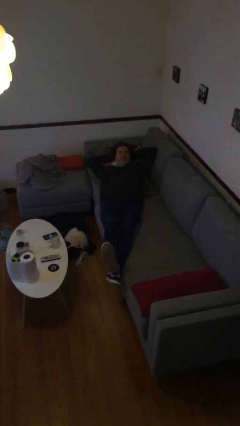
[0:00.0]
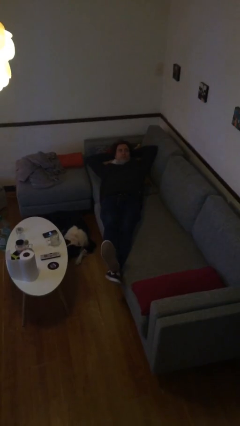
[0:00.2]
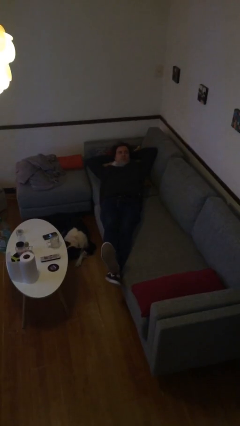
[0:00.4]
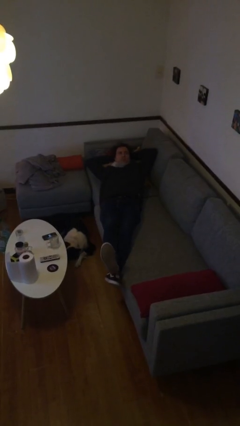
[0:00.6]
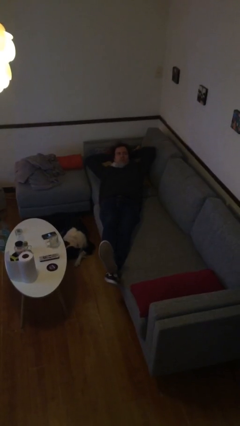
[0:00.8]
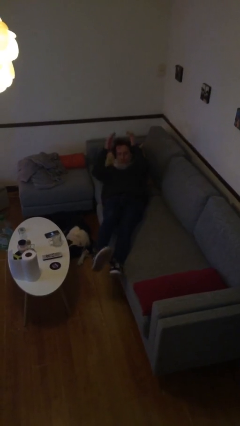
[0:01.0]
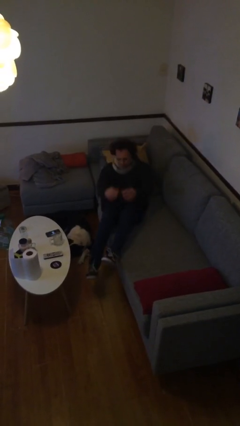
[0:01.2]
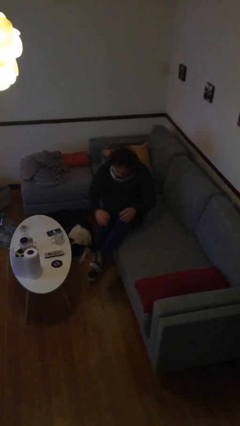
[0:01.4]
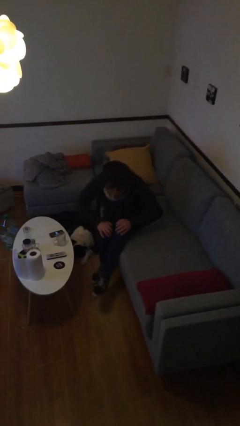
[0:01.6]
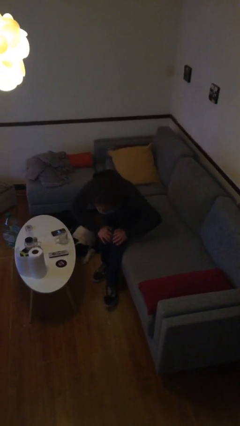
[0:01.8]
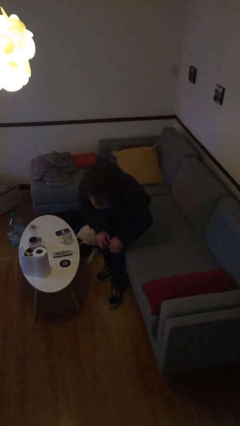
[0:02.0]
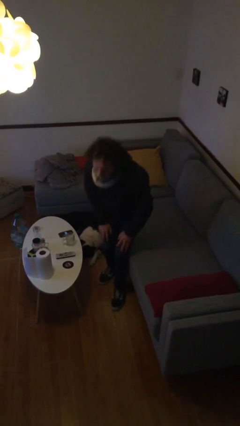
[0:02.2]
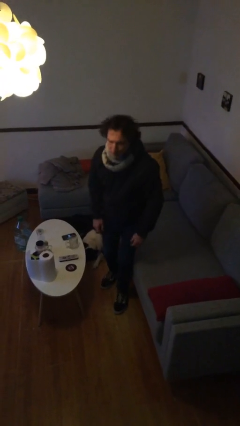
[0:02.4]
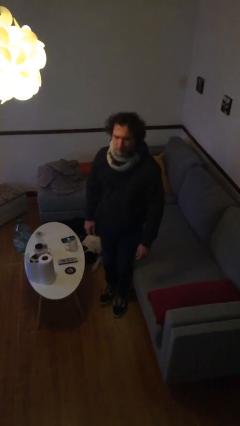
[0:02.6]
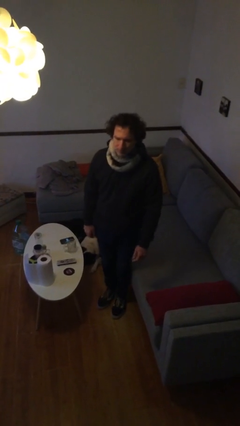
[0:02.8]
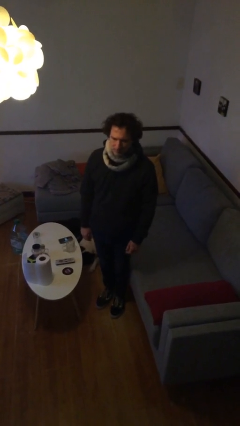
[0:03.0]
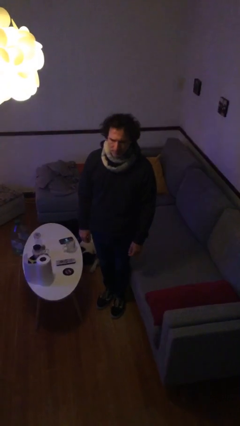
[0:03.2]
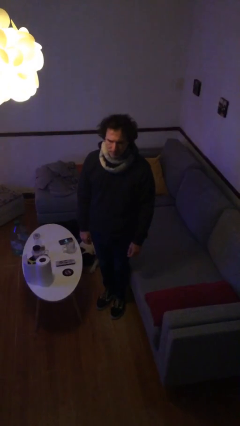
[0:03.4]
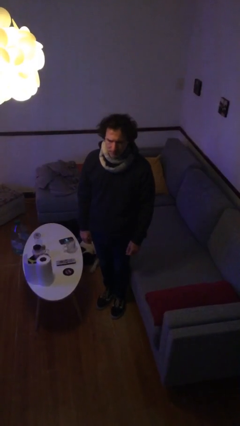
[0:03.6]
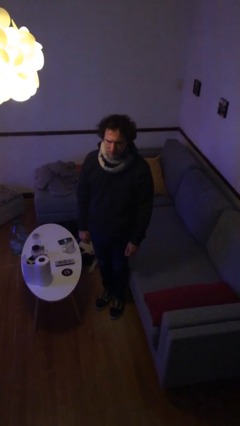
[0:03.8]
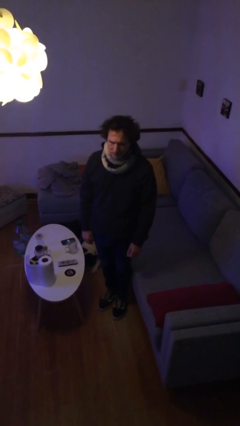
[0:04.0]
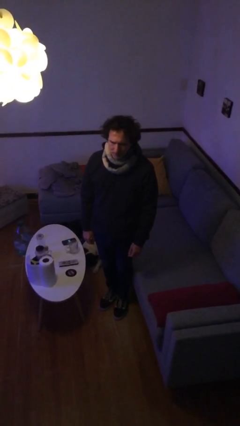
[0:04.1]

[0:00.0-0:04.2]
person stands up

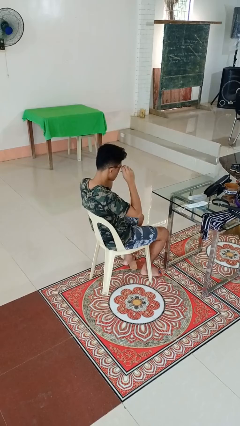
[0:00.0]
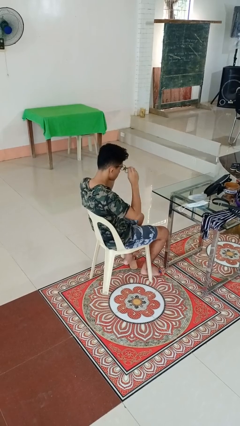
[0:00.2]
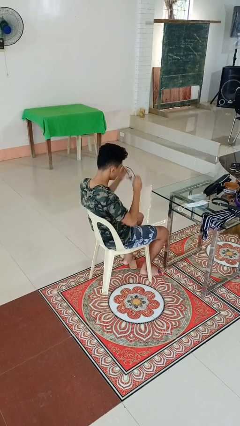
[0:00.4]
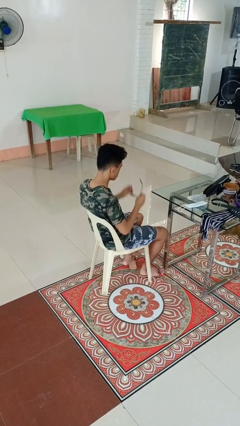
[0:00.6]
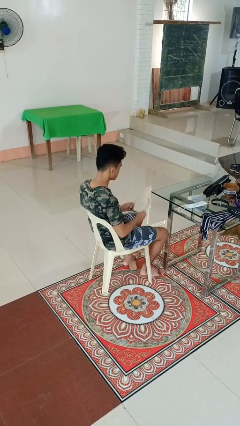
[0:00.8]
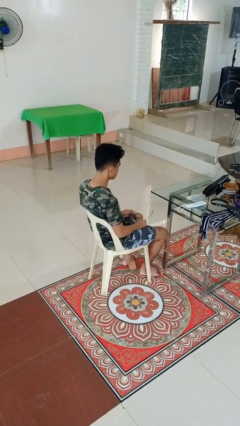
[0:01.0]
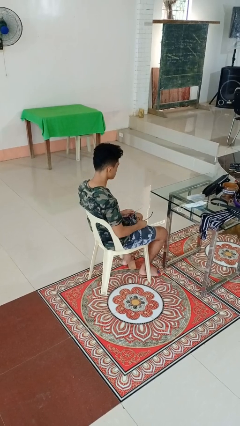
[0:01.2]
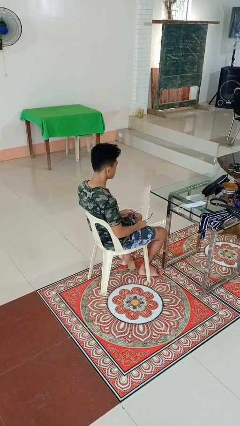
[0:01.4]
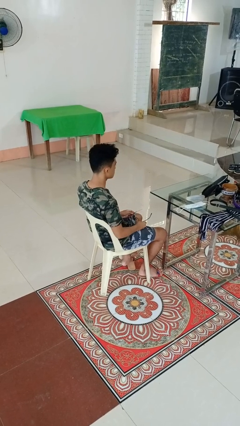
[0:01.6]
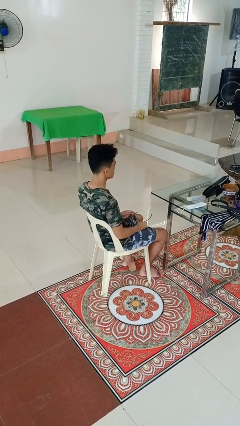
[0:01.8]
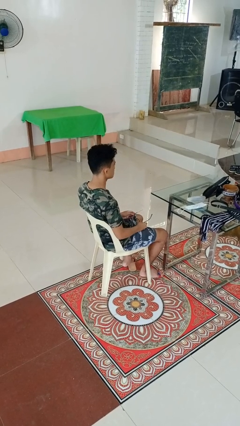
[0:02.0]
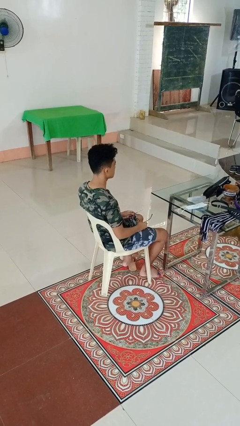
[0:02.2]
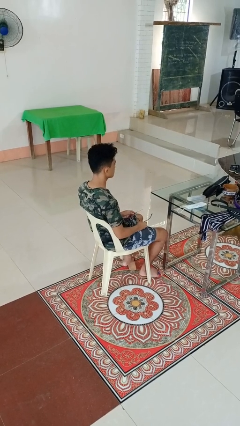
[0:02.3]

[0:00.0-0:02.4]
person takes off glasses

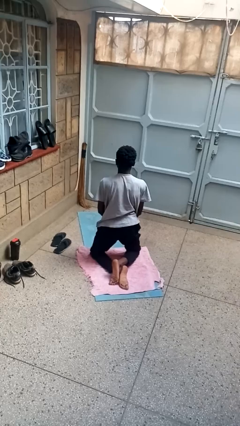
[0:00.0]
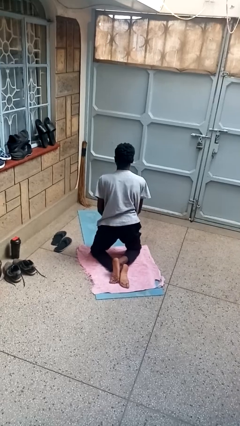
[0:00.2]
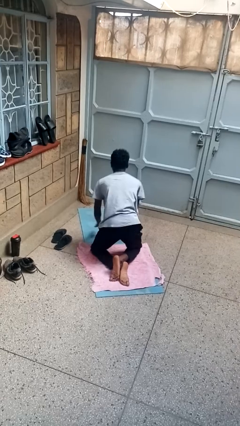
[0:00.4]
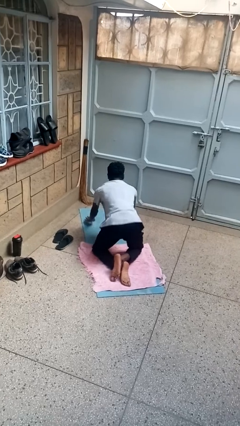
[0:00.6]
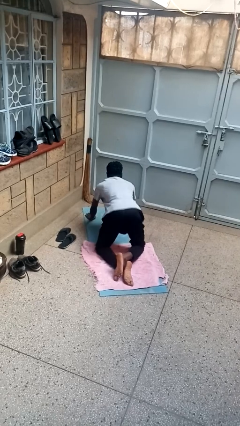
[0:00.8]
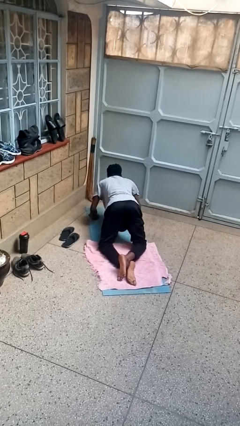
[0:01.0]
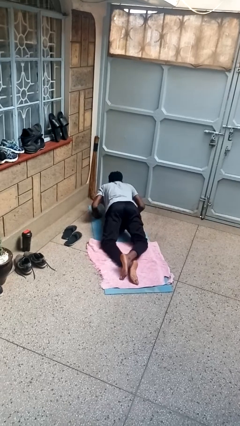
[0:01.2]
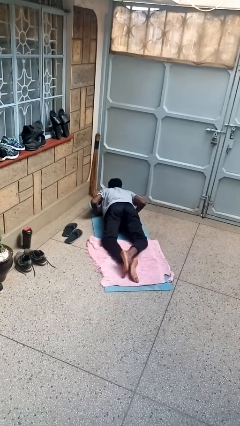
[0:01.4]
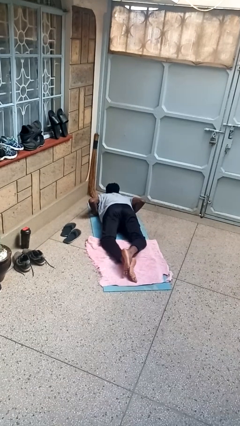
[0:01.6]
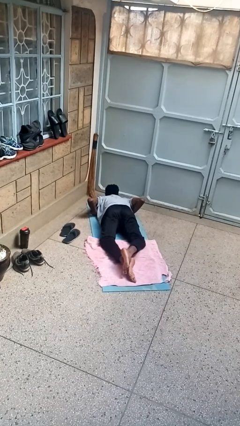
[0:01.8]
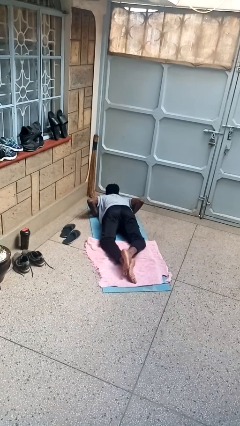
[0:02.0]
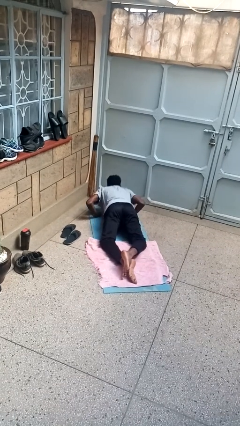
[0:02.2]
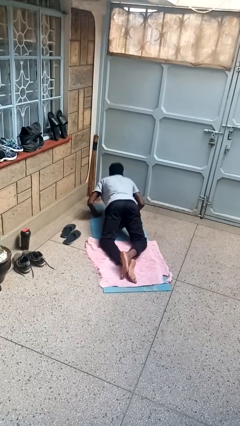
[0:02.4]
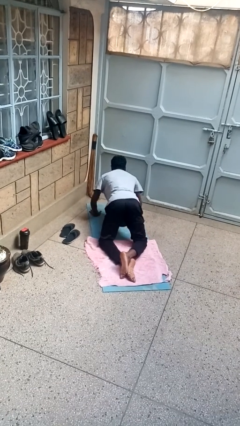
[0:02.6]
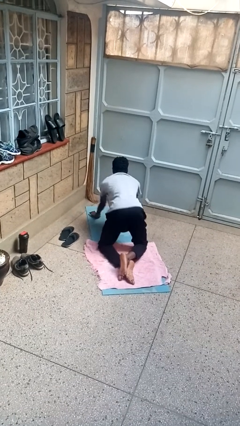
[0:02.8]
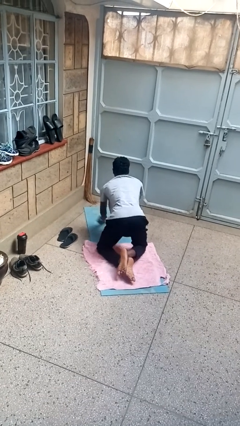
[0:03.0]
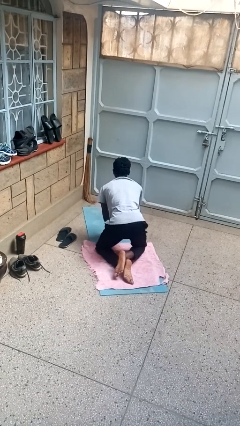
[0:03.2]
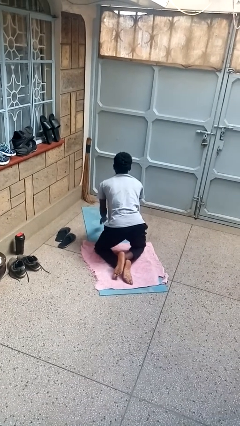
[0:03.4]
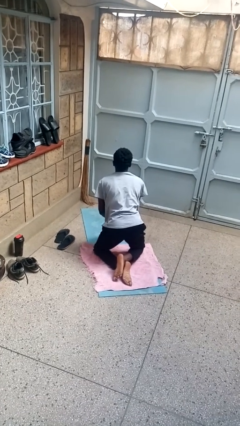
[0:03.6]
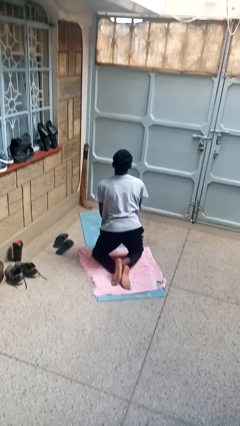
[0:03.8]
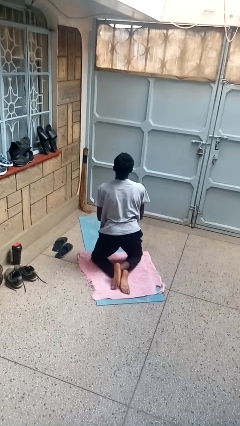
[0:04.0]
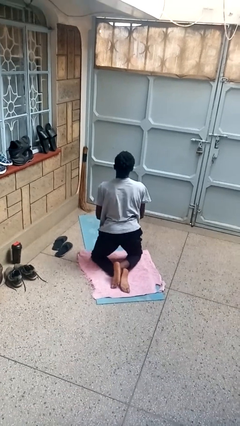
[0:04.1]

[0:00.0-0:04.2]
person exercises with pushup

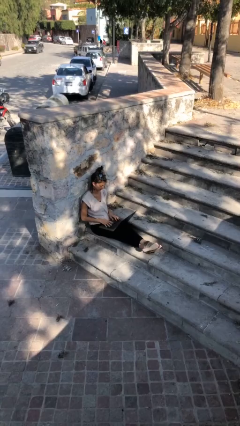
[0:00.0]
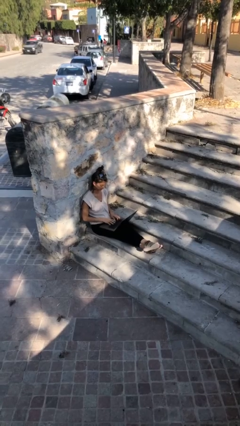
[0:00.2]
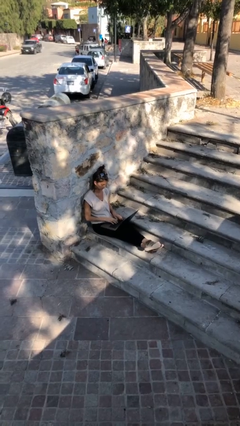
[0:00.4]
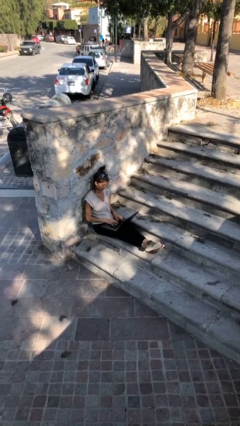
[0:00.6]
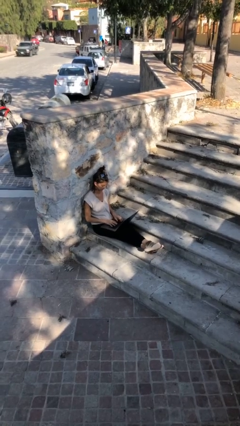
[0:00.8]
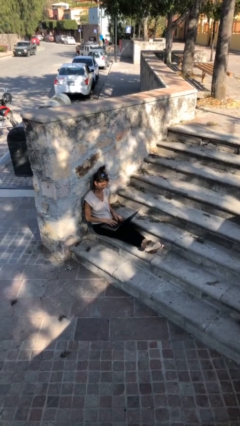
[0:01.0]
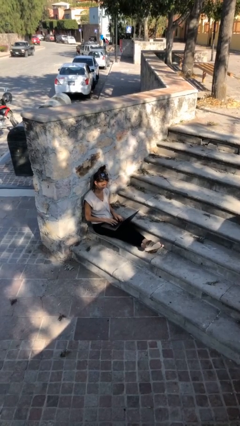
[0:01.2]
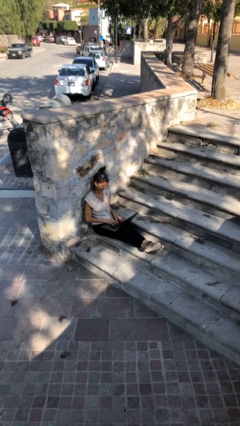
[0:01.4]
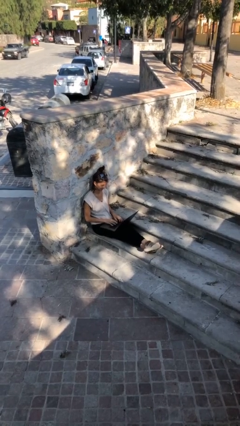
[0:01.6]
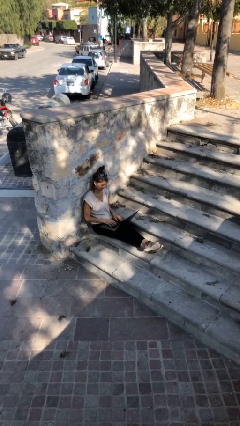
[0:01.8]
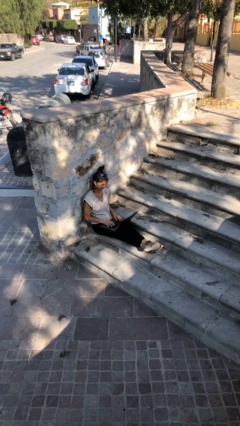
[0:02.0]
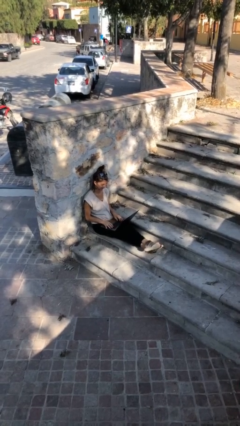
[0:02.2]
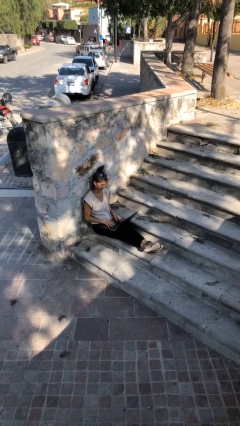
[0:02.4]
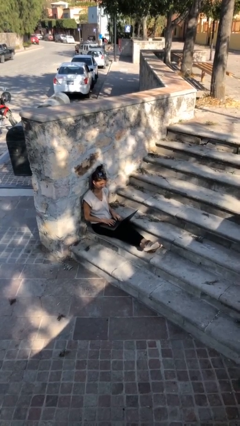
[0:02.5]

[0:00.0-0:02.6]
person interacts with laptop

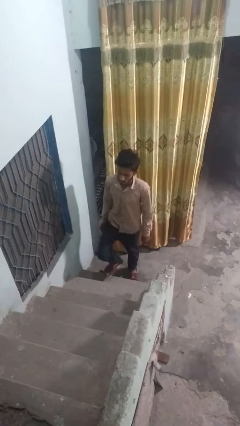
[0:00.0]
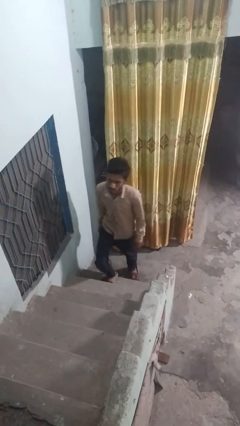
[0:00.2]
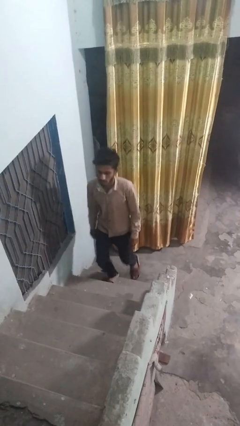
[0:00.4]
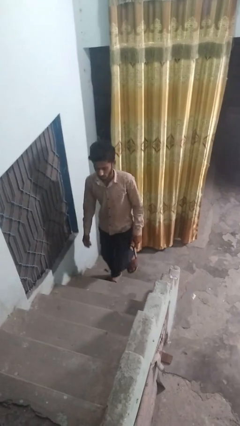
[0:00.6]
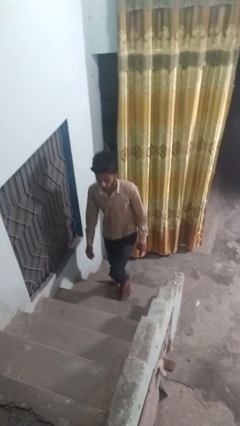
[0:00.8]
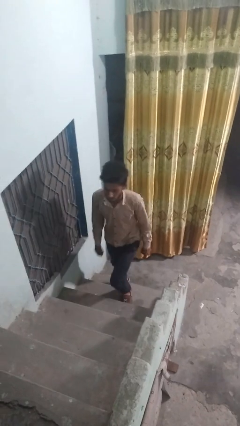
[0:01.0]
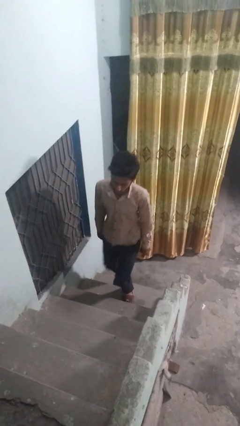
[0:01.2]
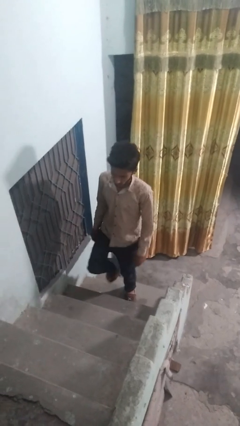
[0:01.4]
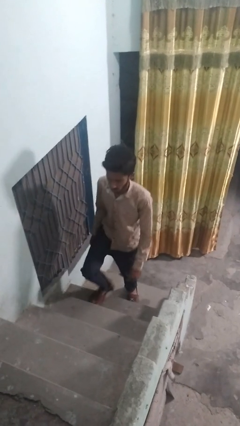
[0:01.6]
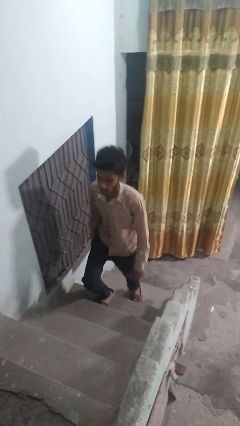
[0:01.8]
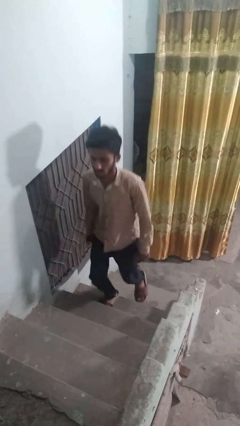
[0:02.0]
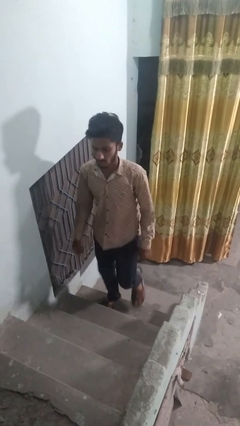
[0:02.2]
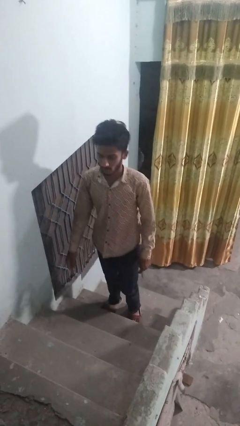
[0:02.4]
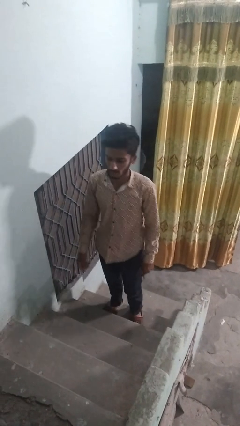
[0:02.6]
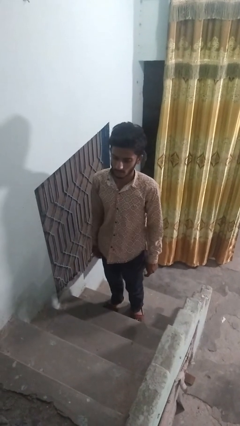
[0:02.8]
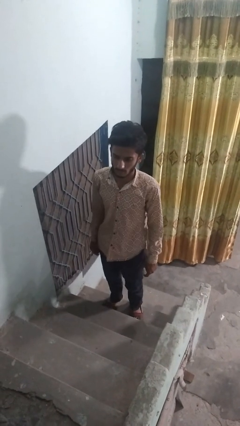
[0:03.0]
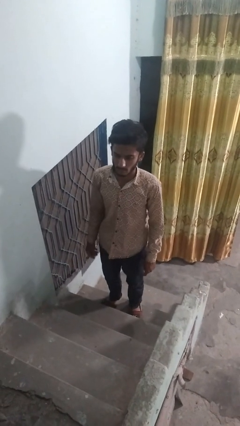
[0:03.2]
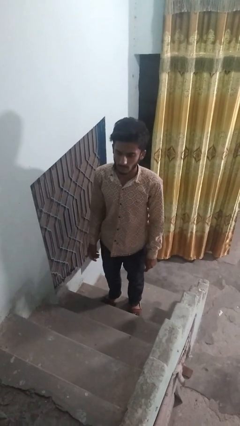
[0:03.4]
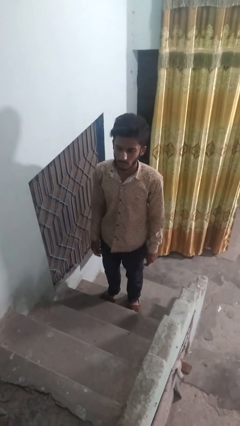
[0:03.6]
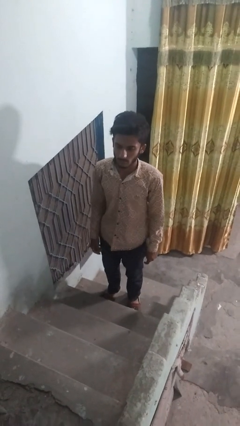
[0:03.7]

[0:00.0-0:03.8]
person climbs up stairs

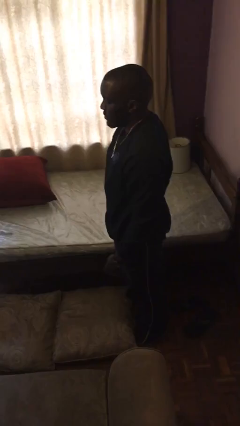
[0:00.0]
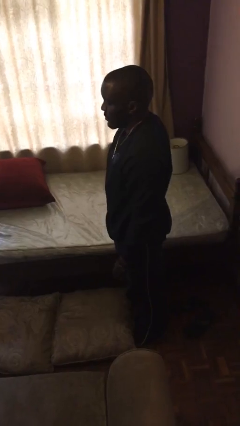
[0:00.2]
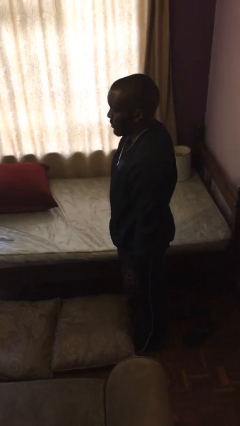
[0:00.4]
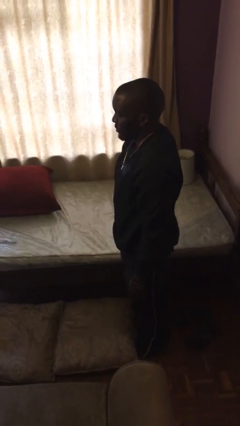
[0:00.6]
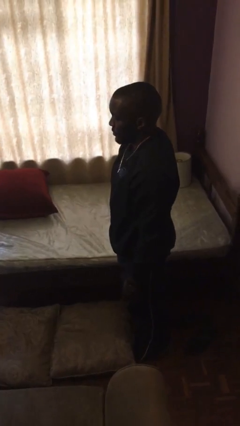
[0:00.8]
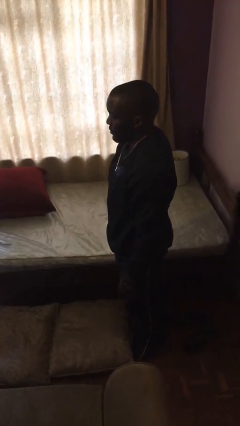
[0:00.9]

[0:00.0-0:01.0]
person stands up from floor
